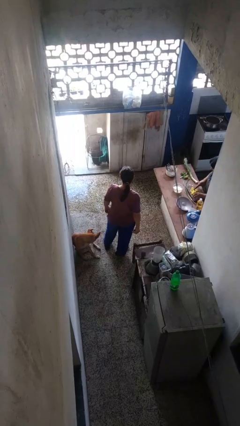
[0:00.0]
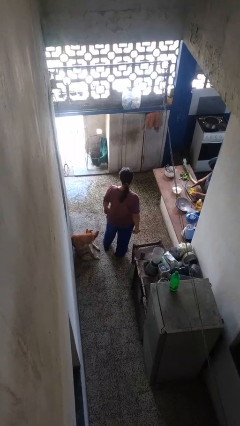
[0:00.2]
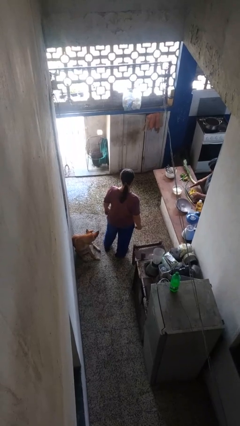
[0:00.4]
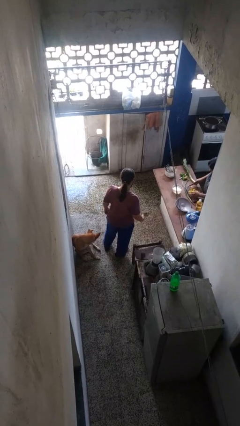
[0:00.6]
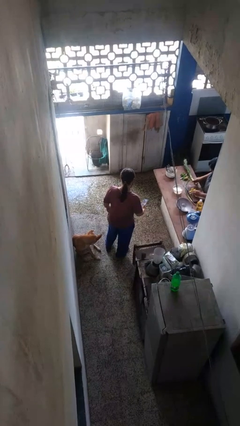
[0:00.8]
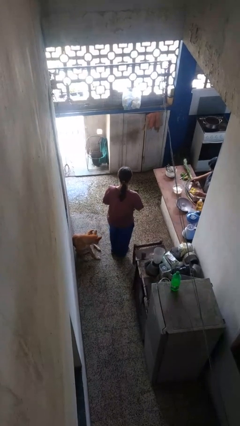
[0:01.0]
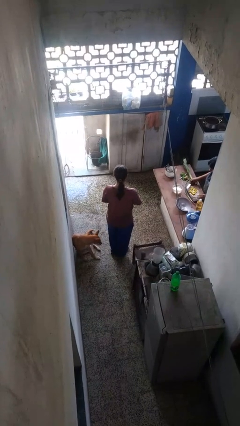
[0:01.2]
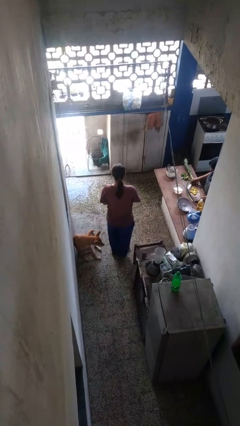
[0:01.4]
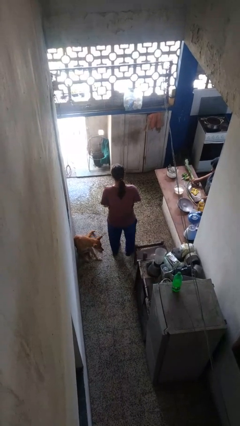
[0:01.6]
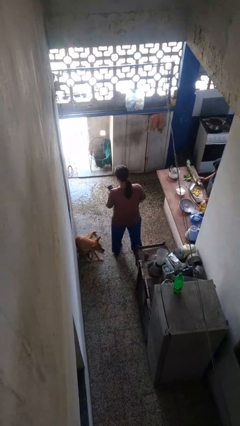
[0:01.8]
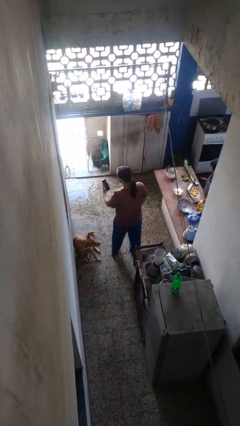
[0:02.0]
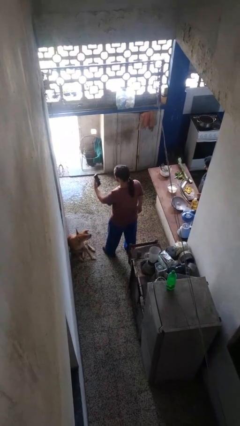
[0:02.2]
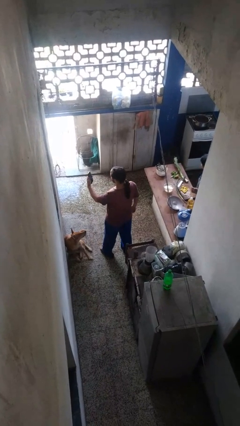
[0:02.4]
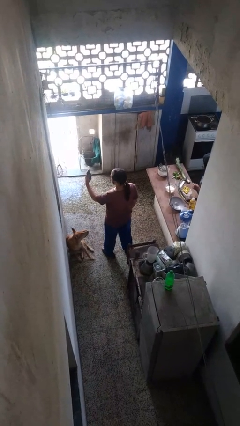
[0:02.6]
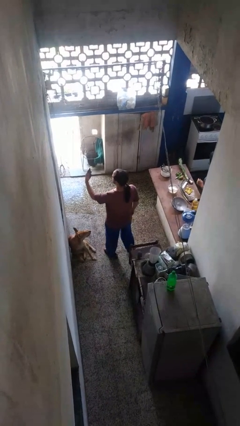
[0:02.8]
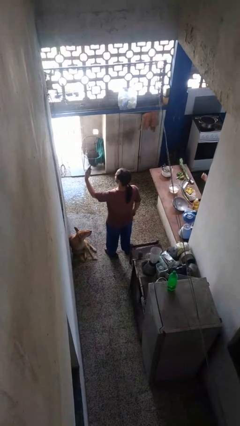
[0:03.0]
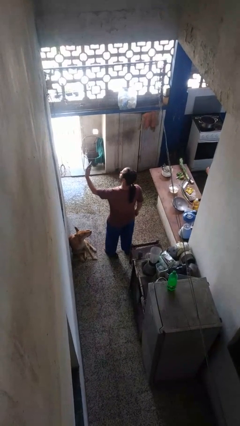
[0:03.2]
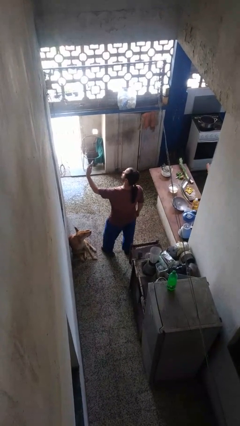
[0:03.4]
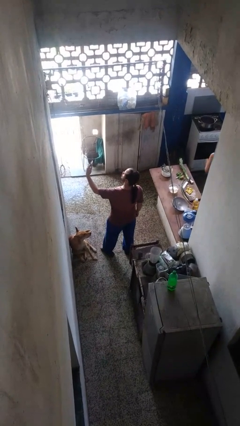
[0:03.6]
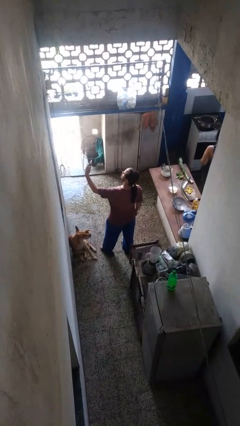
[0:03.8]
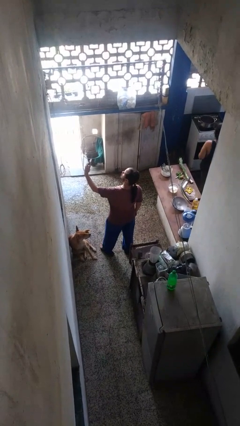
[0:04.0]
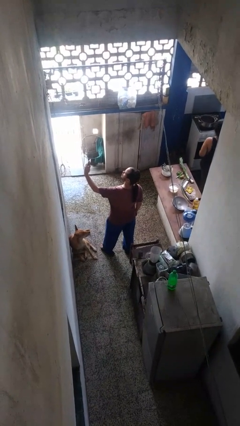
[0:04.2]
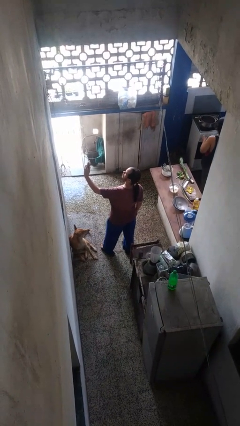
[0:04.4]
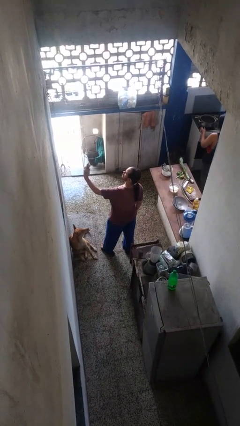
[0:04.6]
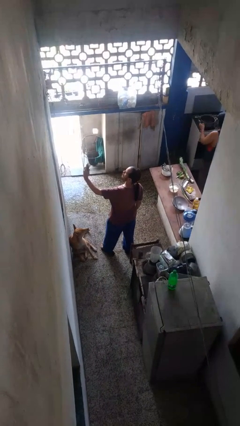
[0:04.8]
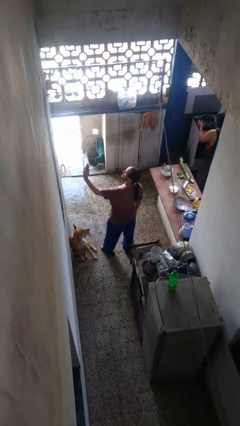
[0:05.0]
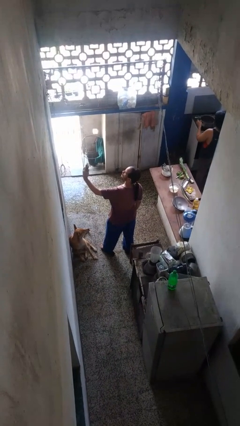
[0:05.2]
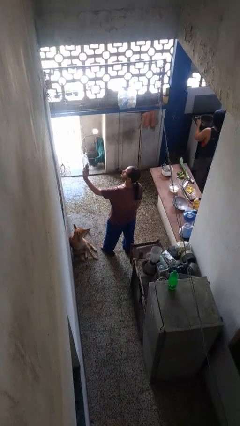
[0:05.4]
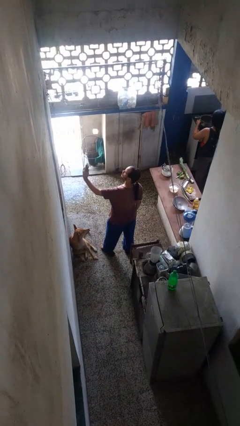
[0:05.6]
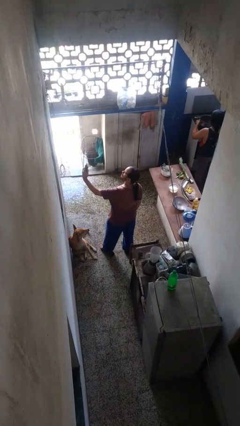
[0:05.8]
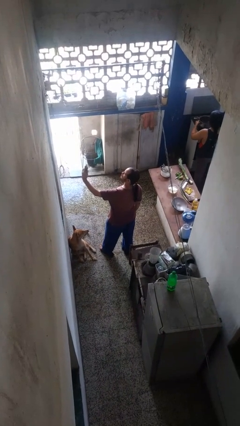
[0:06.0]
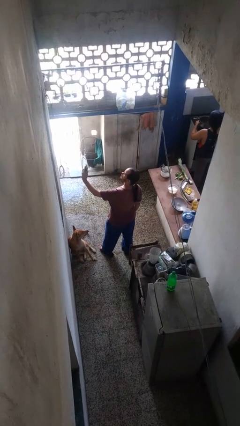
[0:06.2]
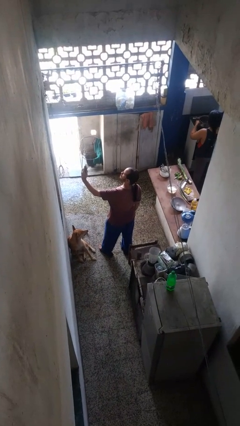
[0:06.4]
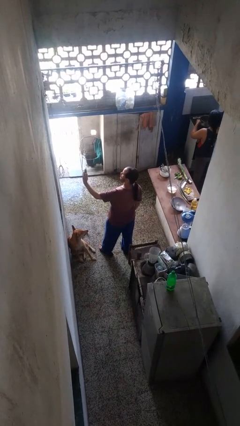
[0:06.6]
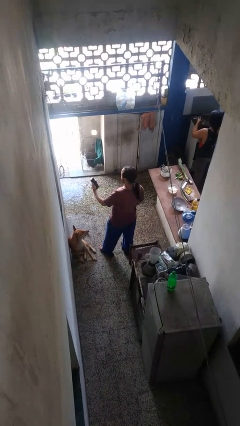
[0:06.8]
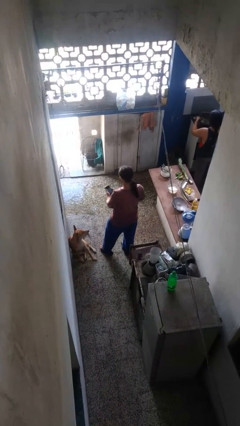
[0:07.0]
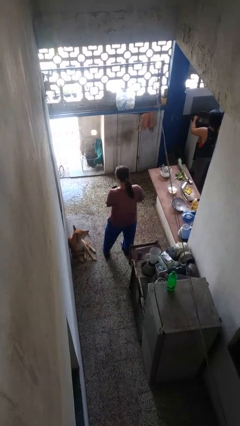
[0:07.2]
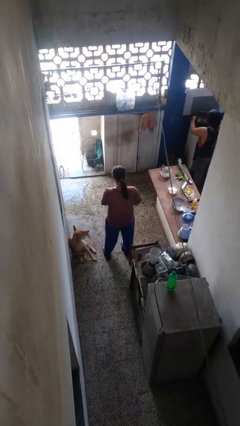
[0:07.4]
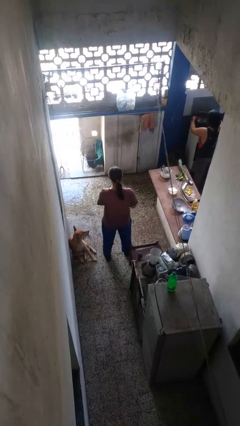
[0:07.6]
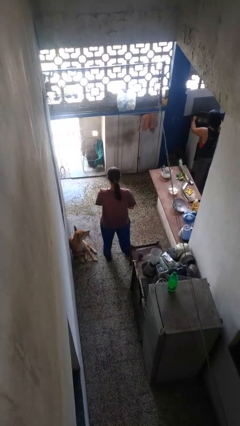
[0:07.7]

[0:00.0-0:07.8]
person takes selfie

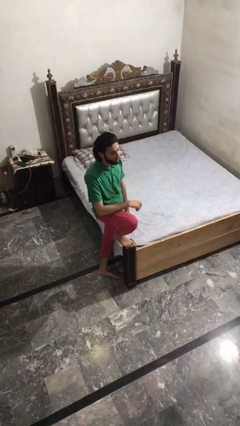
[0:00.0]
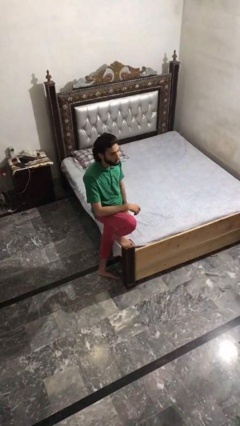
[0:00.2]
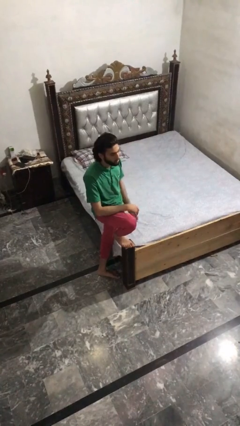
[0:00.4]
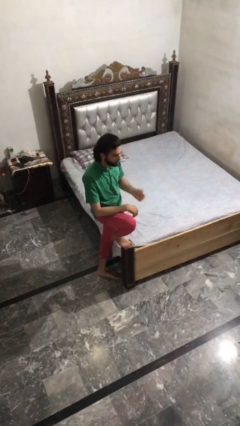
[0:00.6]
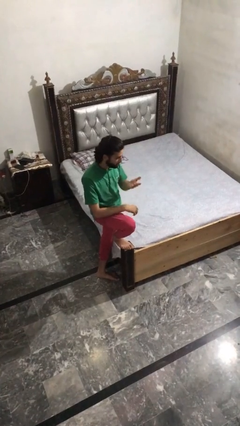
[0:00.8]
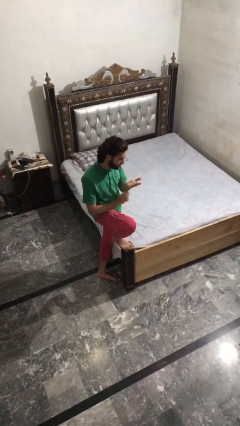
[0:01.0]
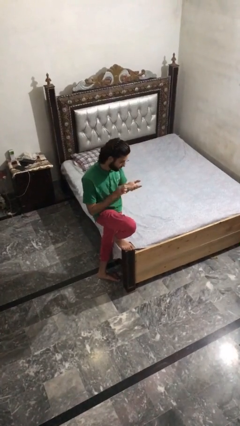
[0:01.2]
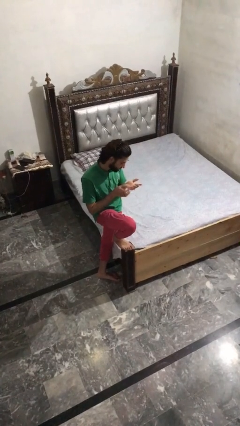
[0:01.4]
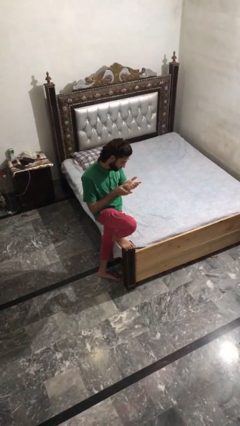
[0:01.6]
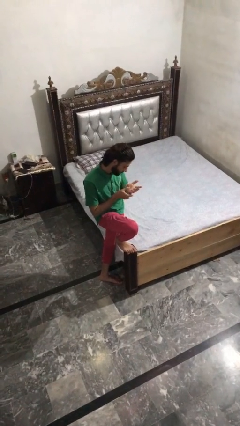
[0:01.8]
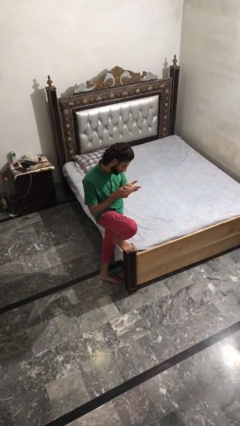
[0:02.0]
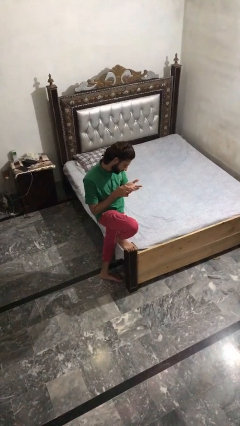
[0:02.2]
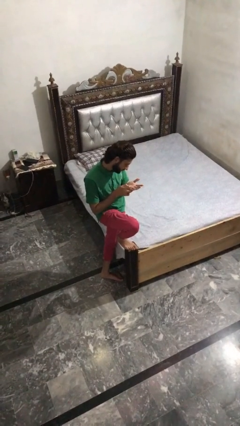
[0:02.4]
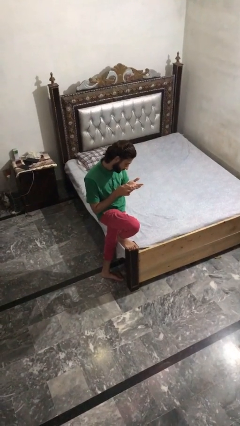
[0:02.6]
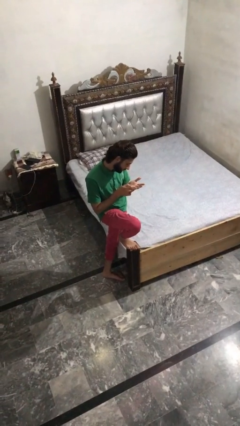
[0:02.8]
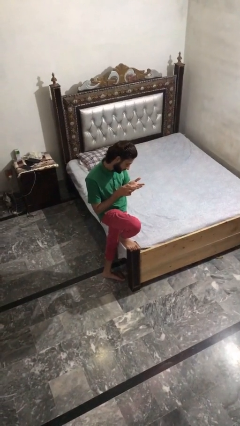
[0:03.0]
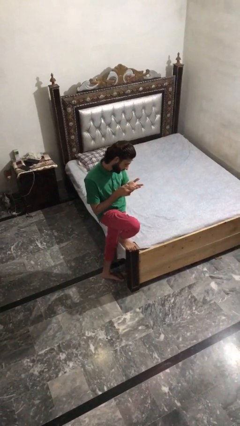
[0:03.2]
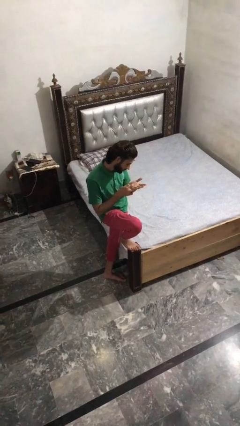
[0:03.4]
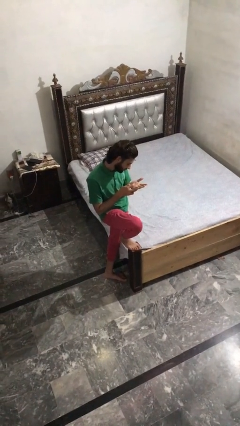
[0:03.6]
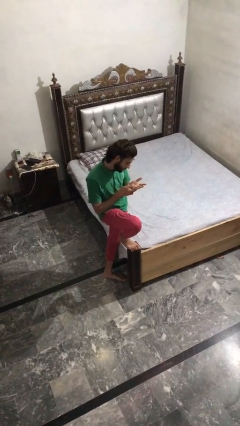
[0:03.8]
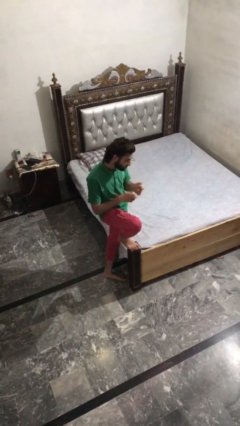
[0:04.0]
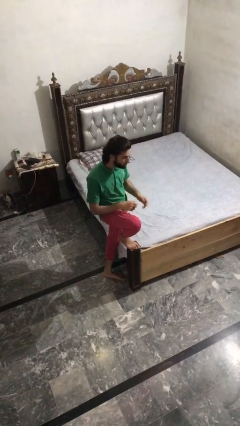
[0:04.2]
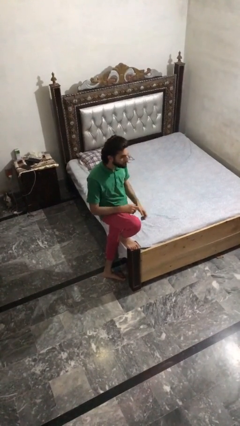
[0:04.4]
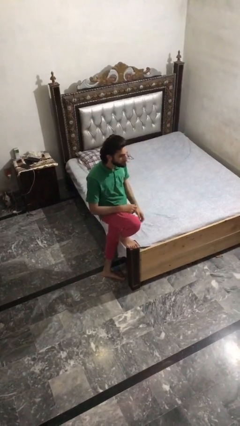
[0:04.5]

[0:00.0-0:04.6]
person looks at hands in lap

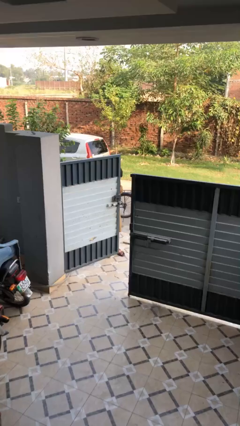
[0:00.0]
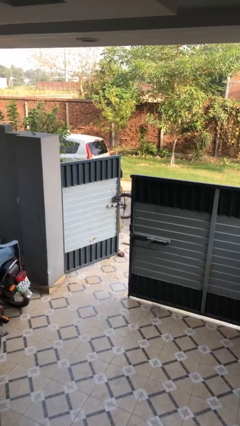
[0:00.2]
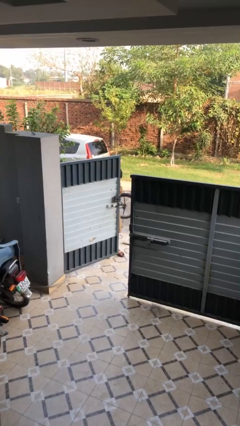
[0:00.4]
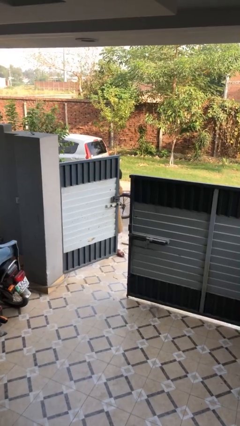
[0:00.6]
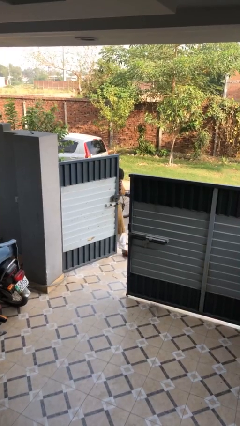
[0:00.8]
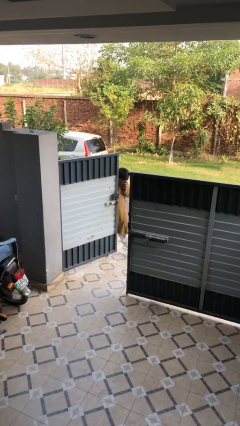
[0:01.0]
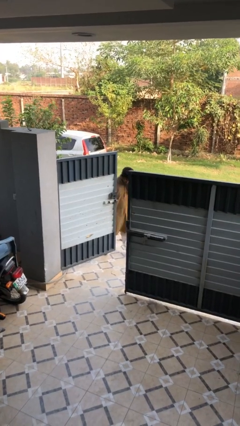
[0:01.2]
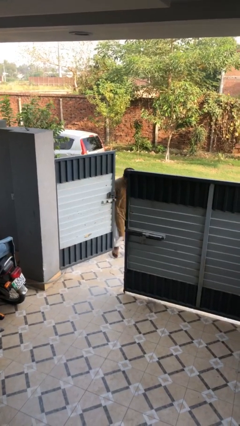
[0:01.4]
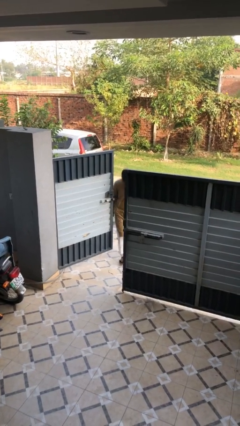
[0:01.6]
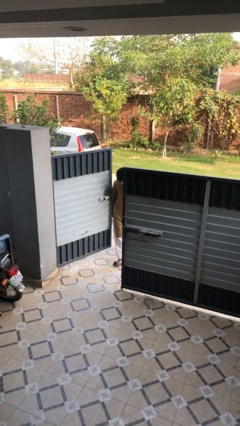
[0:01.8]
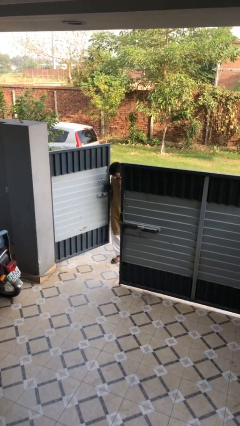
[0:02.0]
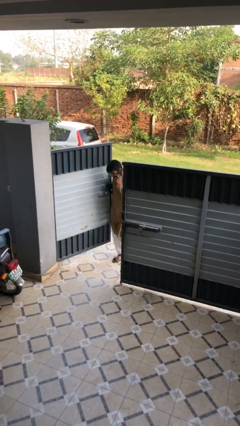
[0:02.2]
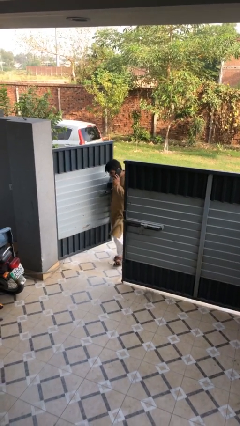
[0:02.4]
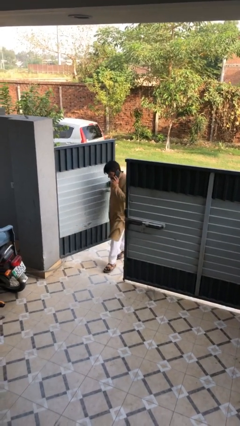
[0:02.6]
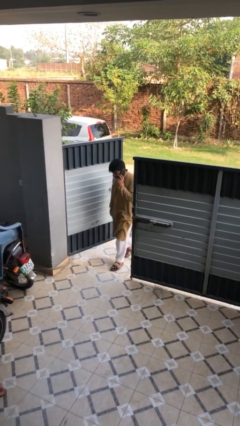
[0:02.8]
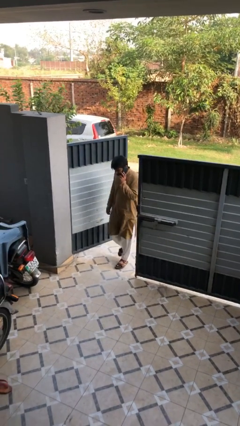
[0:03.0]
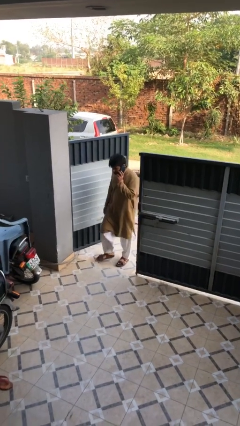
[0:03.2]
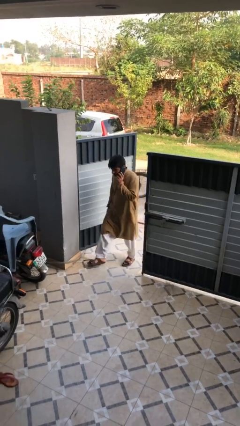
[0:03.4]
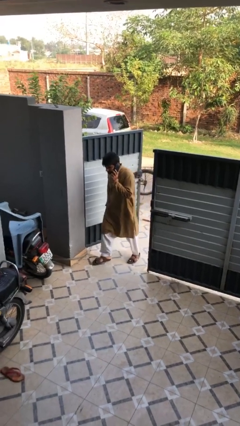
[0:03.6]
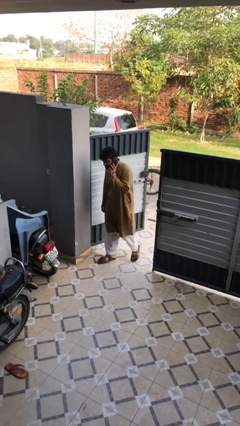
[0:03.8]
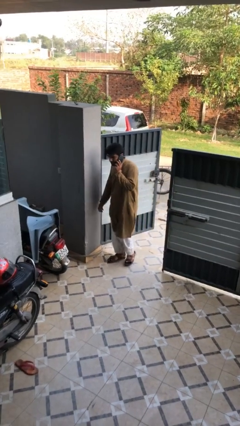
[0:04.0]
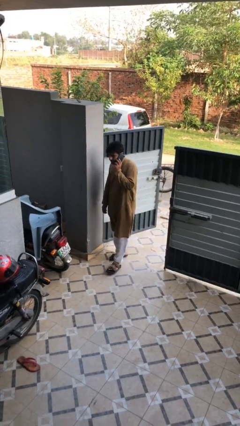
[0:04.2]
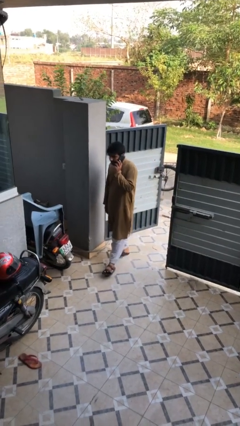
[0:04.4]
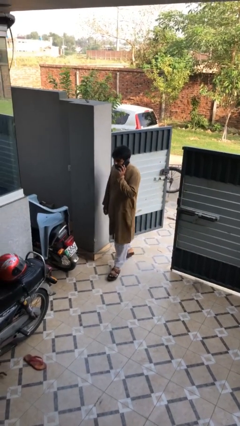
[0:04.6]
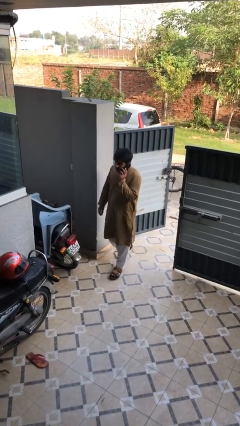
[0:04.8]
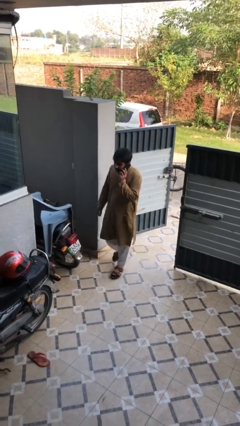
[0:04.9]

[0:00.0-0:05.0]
person enters scene through structure

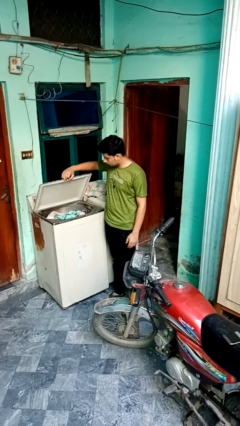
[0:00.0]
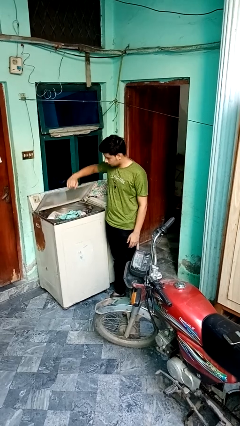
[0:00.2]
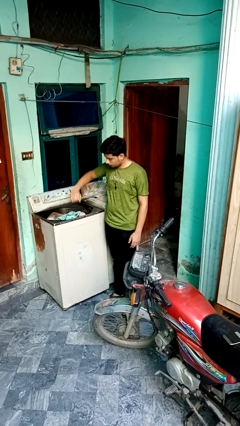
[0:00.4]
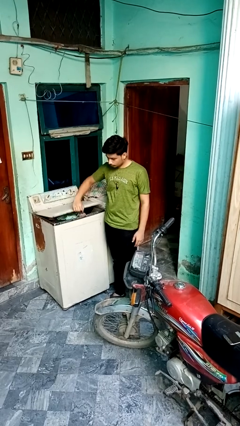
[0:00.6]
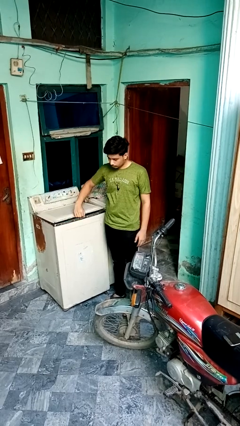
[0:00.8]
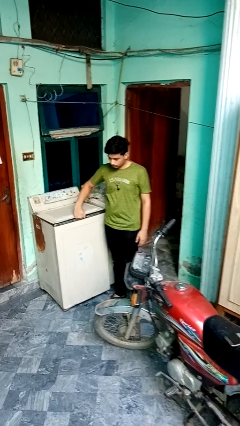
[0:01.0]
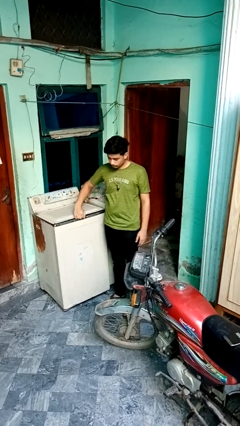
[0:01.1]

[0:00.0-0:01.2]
person closes clothes washer
